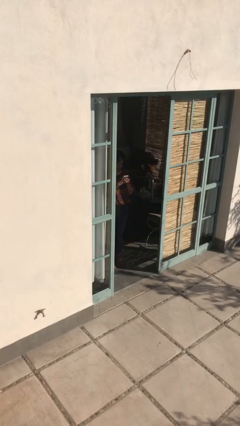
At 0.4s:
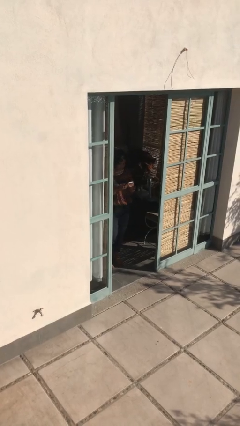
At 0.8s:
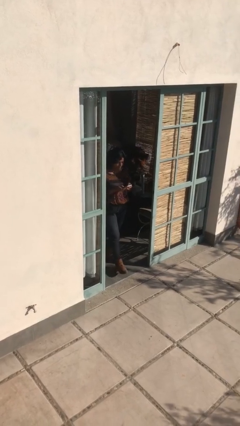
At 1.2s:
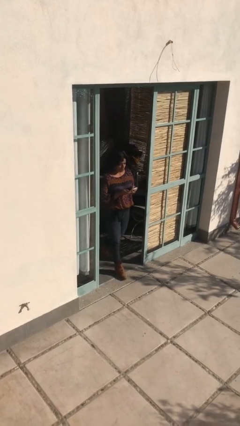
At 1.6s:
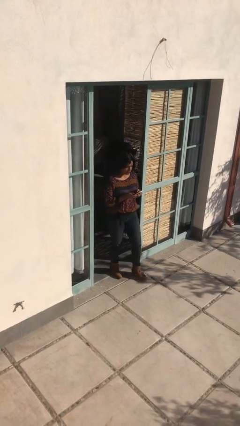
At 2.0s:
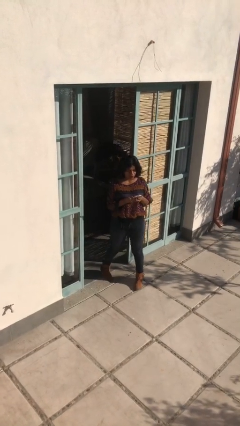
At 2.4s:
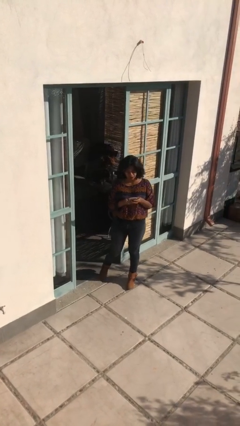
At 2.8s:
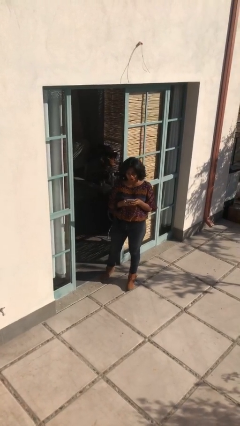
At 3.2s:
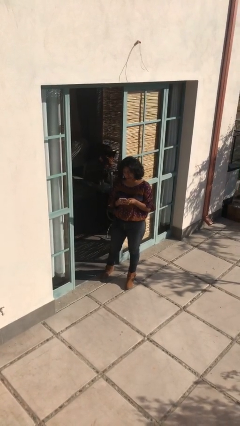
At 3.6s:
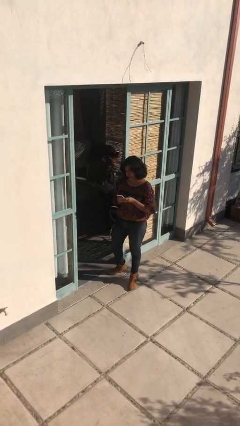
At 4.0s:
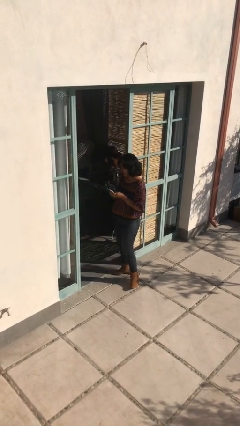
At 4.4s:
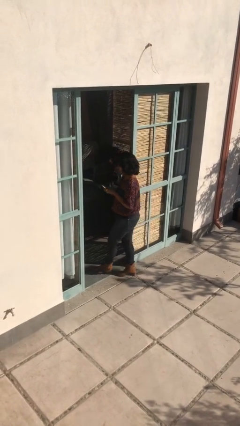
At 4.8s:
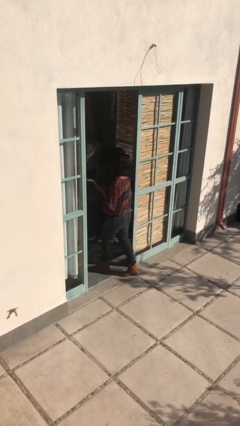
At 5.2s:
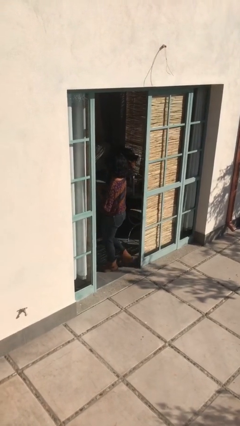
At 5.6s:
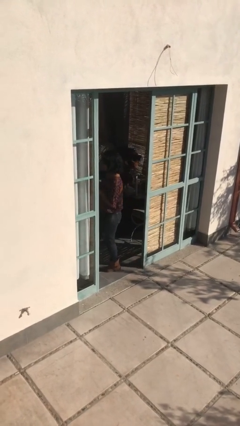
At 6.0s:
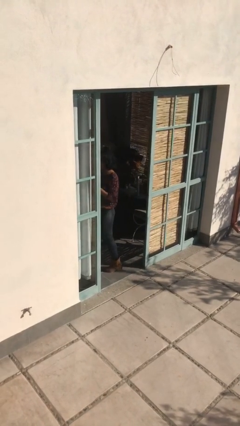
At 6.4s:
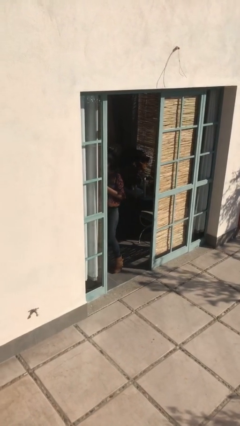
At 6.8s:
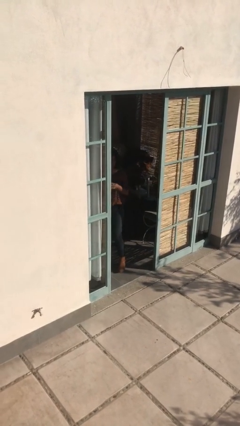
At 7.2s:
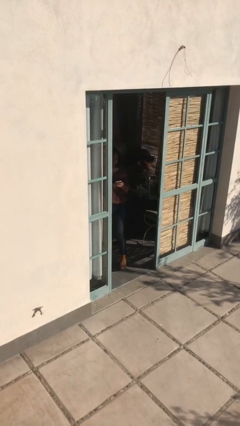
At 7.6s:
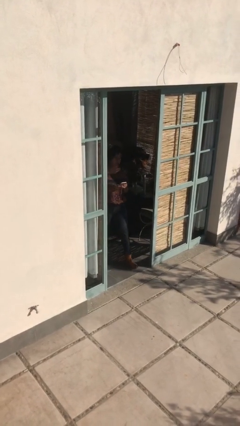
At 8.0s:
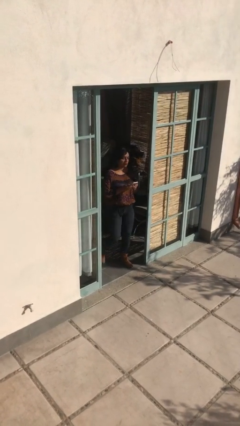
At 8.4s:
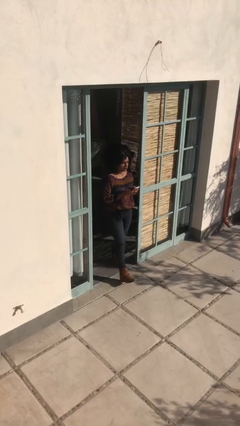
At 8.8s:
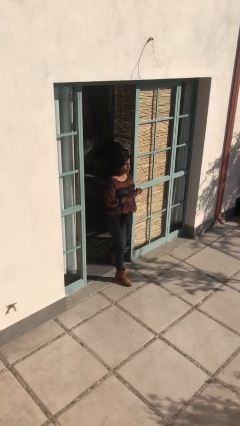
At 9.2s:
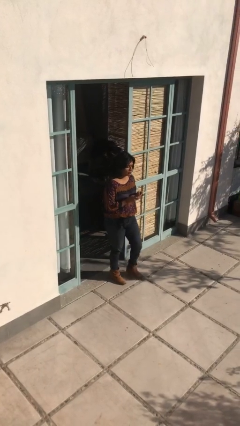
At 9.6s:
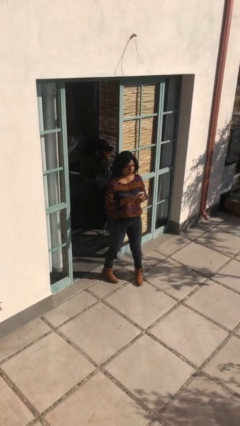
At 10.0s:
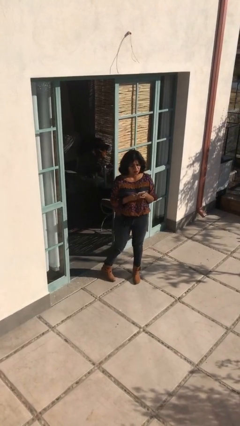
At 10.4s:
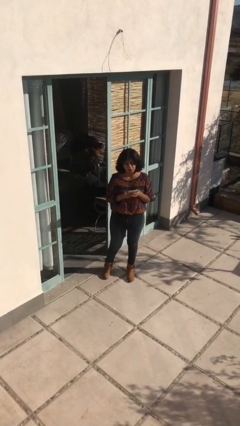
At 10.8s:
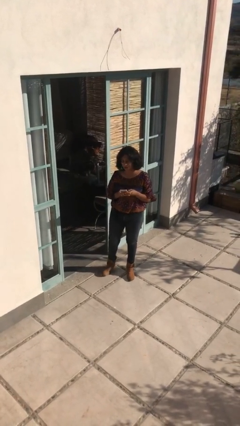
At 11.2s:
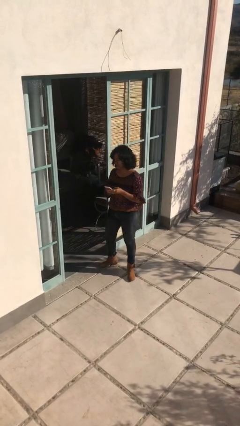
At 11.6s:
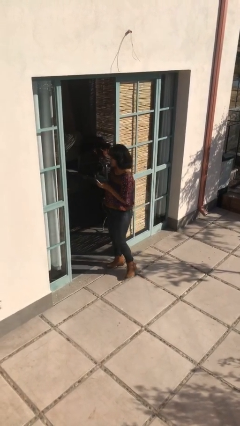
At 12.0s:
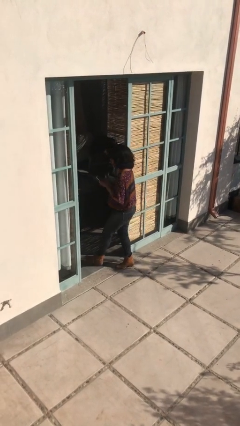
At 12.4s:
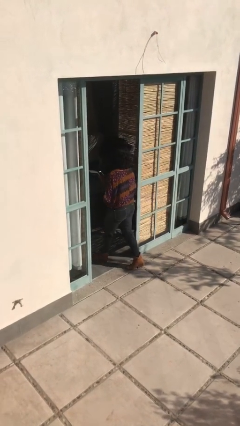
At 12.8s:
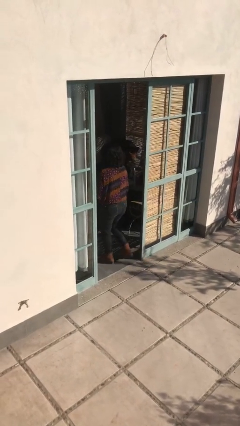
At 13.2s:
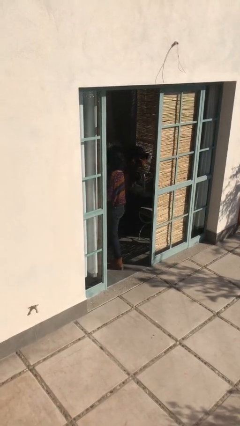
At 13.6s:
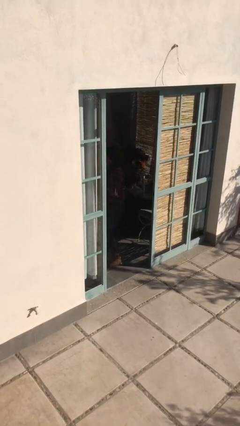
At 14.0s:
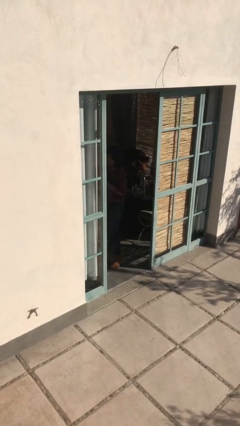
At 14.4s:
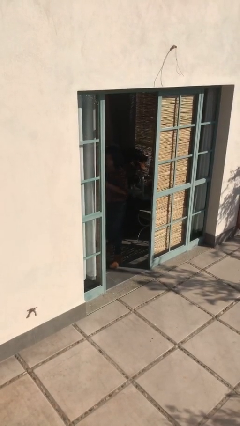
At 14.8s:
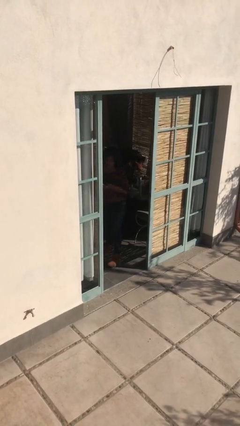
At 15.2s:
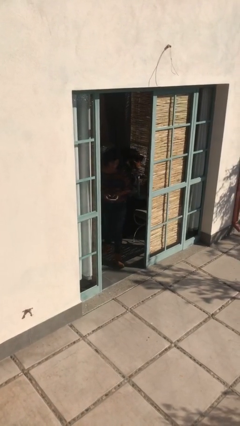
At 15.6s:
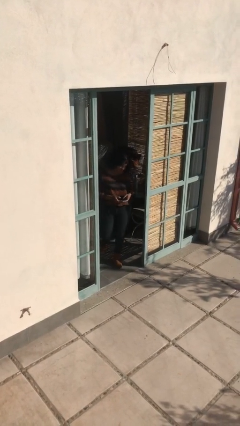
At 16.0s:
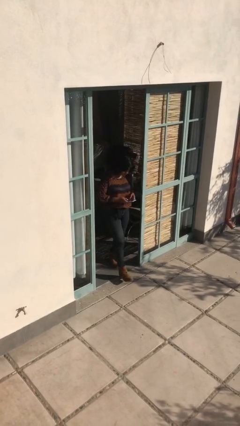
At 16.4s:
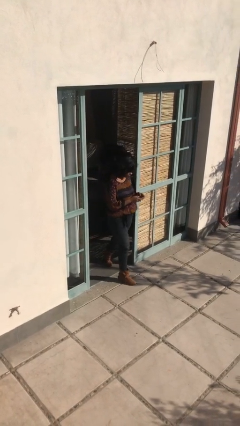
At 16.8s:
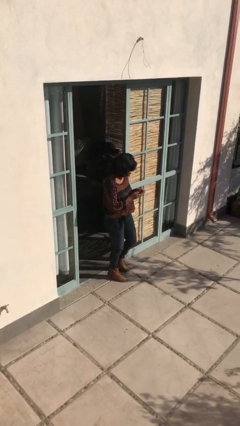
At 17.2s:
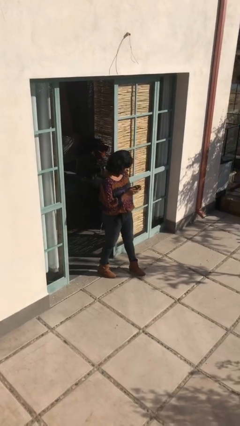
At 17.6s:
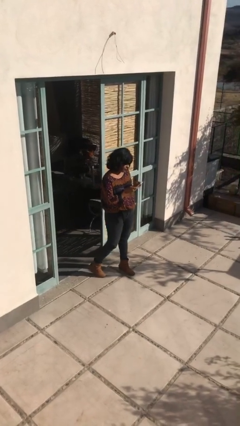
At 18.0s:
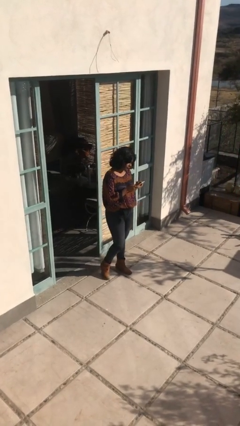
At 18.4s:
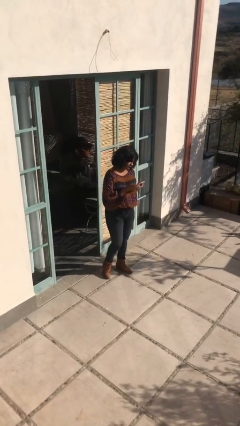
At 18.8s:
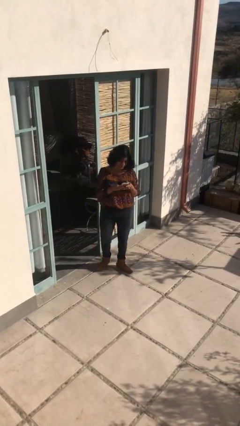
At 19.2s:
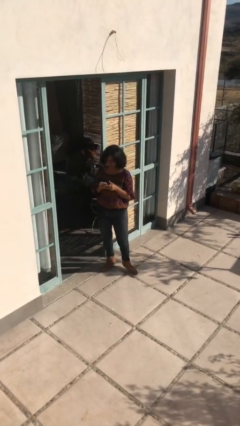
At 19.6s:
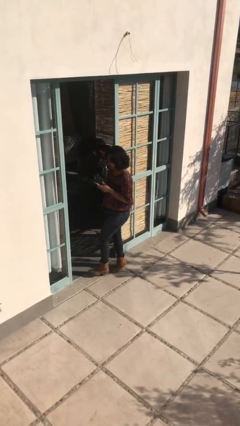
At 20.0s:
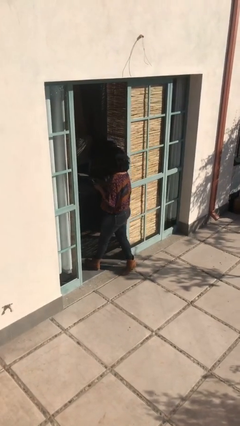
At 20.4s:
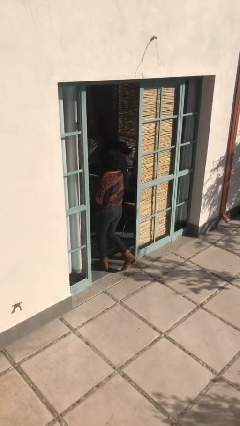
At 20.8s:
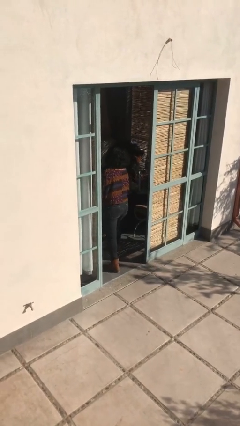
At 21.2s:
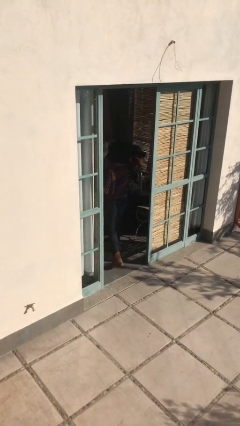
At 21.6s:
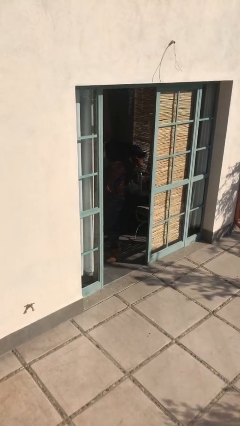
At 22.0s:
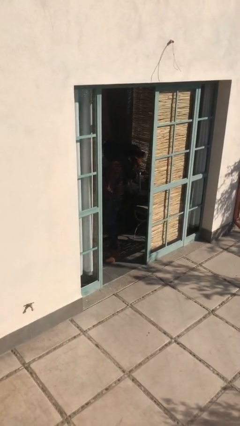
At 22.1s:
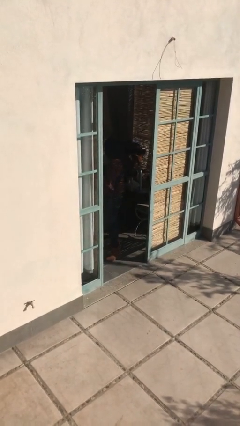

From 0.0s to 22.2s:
person texts on phone

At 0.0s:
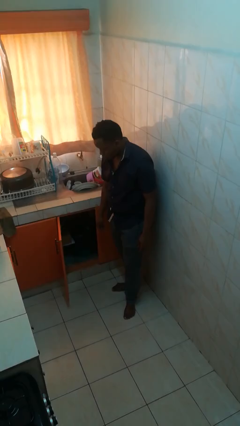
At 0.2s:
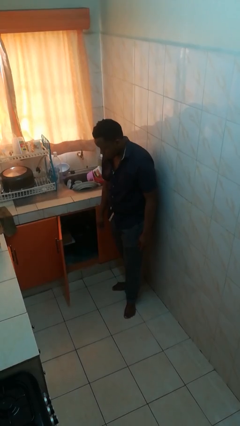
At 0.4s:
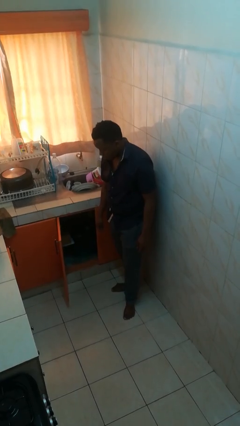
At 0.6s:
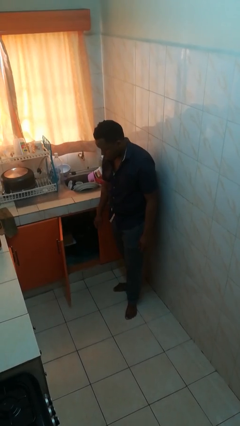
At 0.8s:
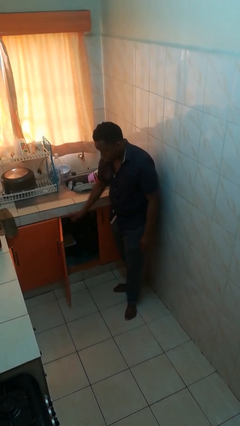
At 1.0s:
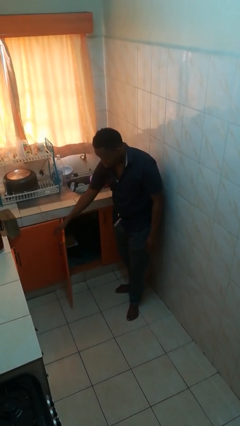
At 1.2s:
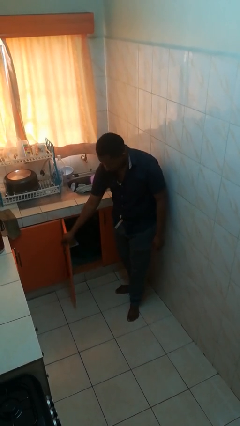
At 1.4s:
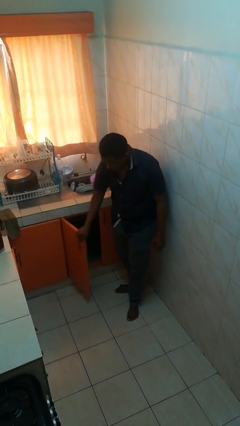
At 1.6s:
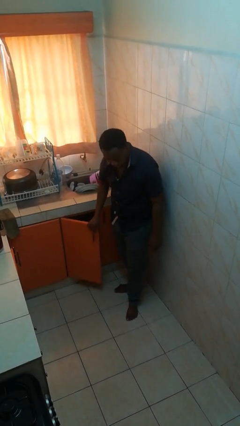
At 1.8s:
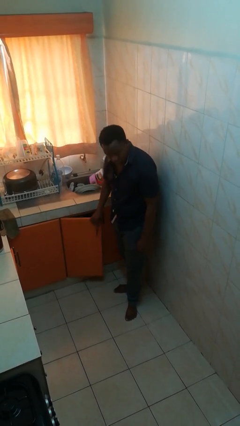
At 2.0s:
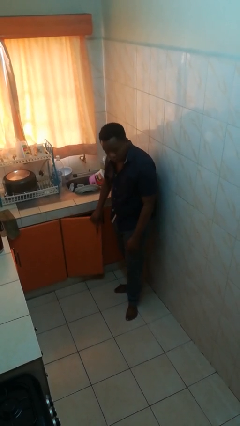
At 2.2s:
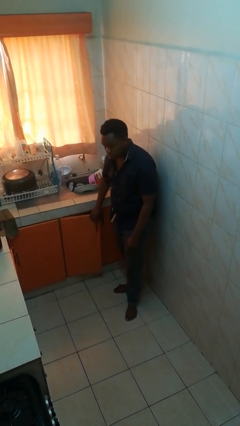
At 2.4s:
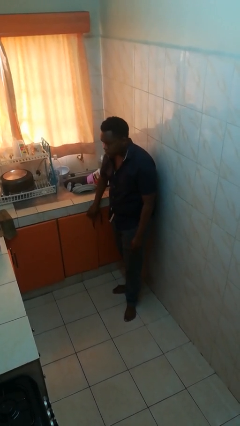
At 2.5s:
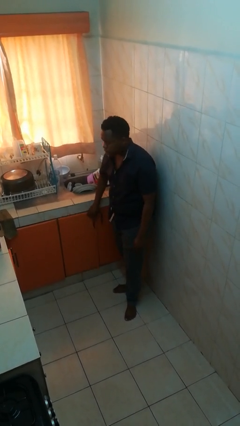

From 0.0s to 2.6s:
person closes cabinet

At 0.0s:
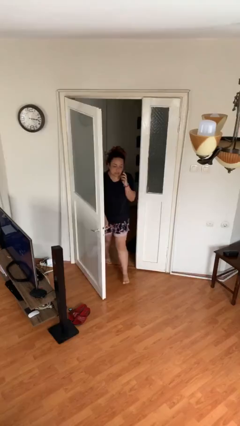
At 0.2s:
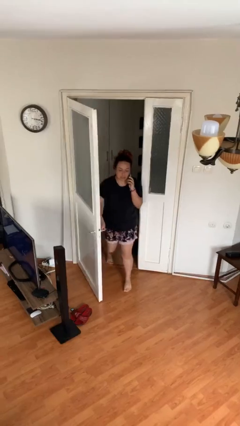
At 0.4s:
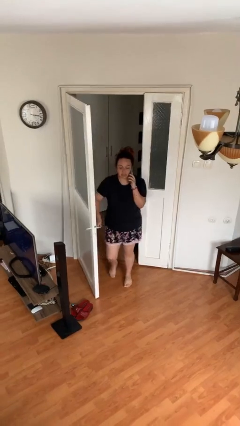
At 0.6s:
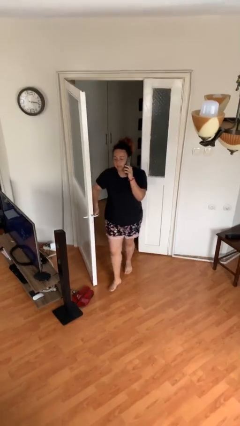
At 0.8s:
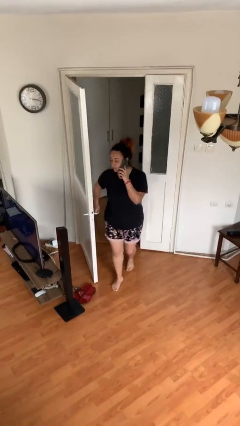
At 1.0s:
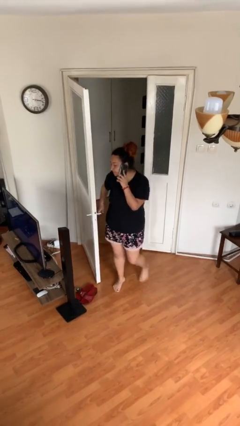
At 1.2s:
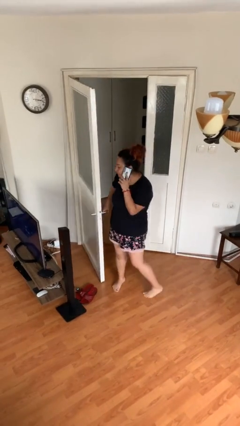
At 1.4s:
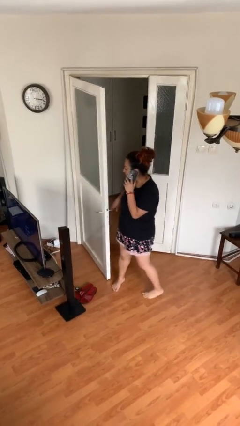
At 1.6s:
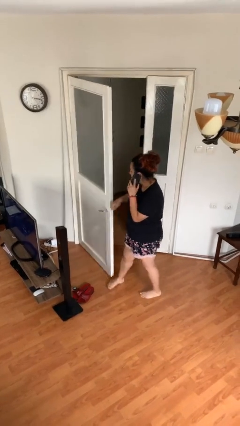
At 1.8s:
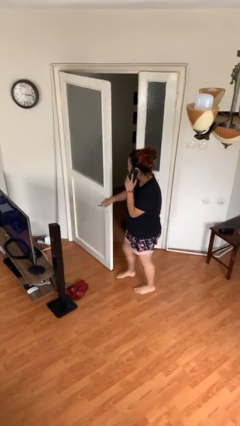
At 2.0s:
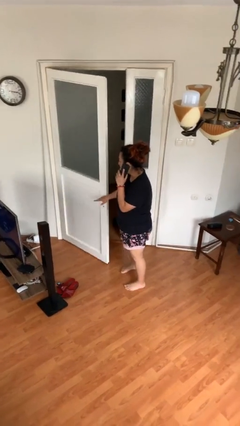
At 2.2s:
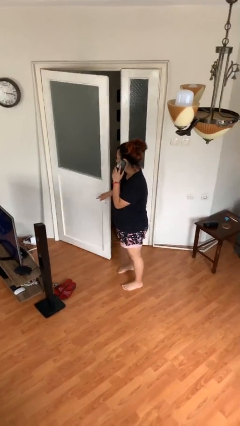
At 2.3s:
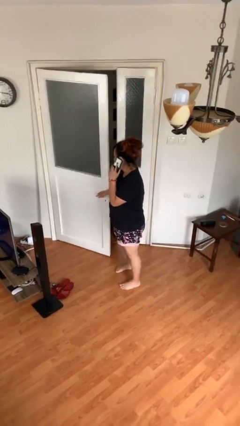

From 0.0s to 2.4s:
person enters scene through structure

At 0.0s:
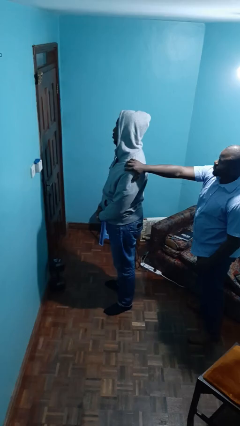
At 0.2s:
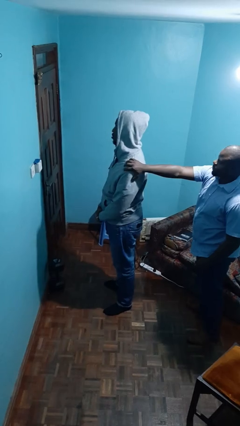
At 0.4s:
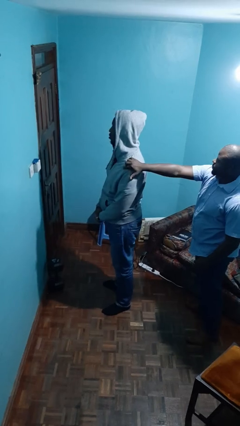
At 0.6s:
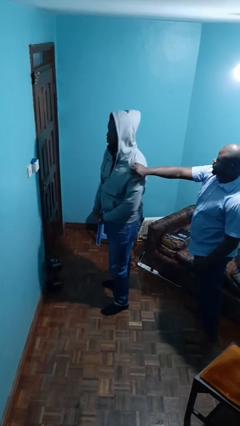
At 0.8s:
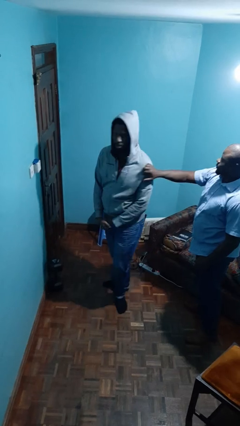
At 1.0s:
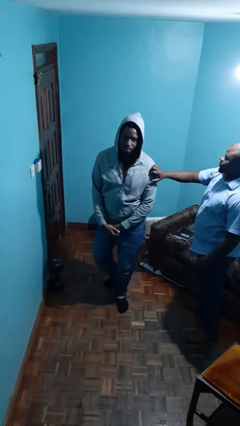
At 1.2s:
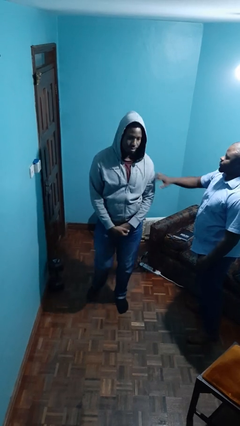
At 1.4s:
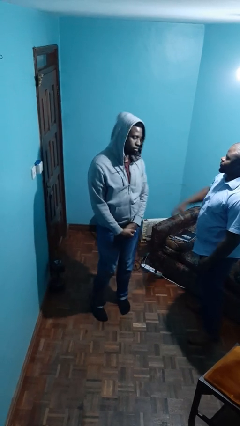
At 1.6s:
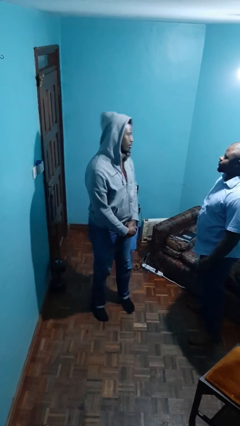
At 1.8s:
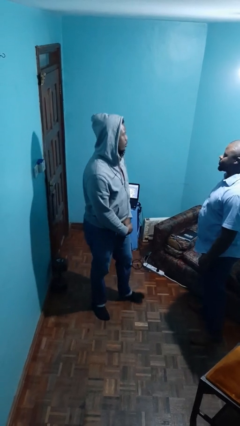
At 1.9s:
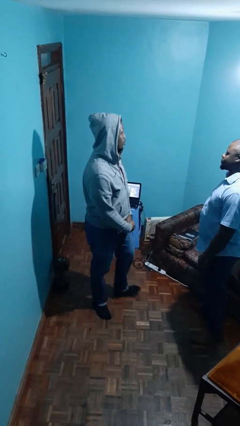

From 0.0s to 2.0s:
person spins person around
